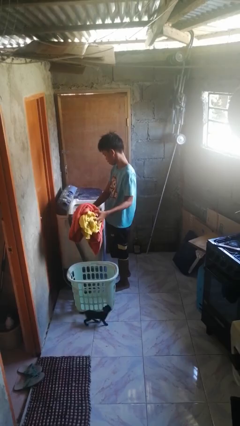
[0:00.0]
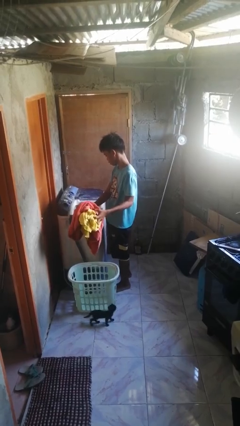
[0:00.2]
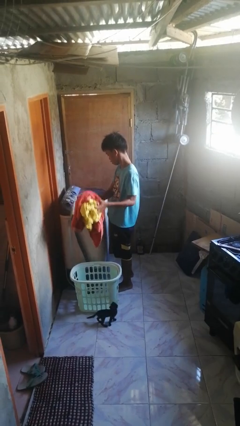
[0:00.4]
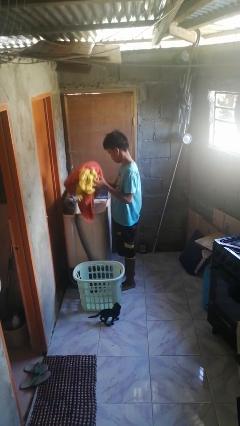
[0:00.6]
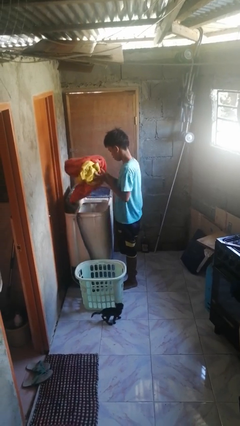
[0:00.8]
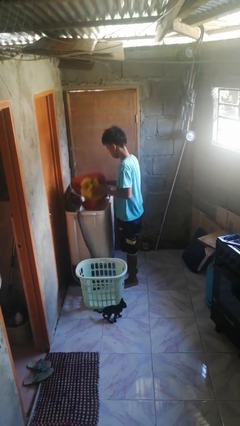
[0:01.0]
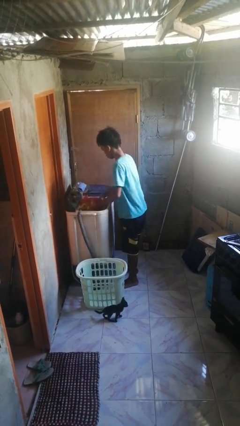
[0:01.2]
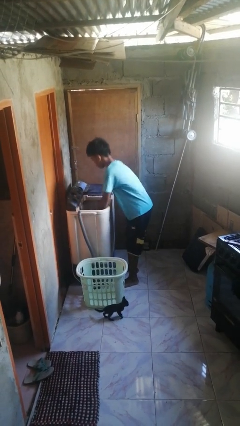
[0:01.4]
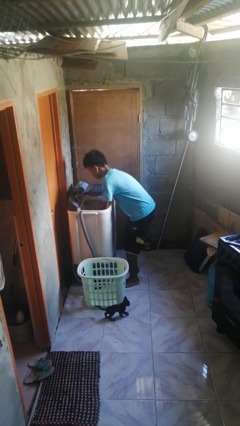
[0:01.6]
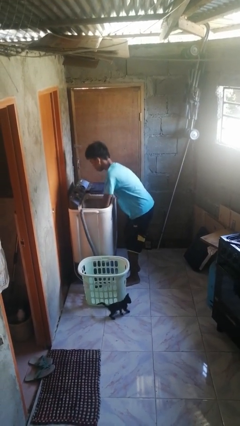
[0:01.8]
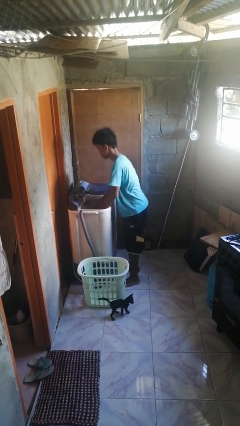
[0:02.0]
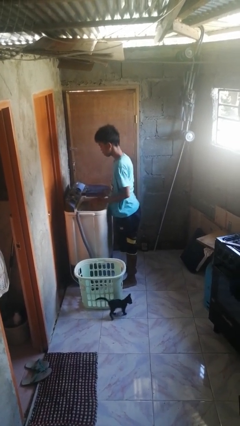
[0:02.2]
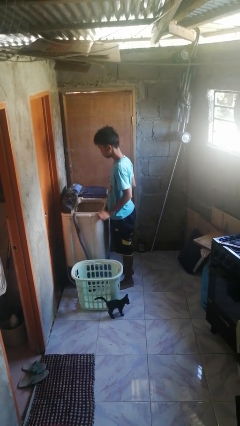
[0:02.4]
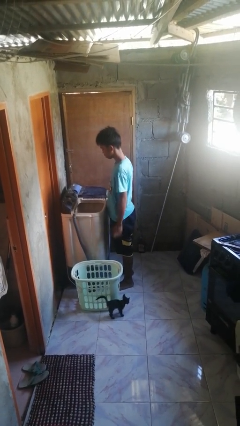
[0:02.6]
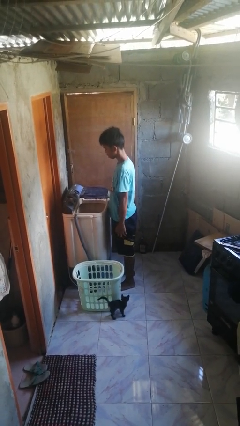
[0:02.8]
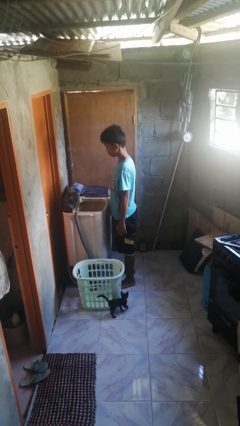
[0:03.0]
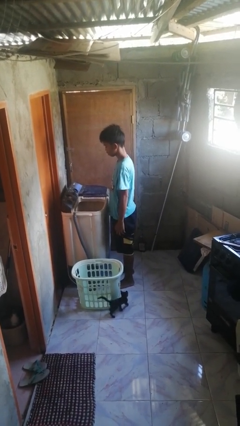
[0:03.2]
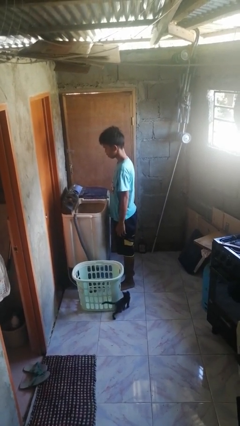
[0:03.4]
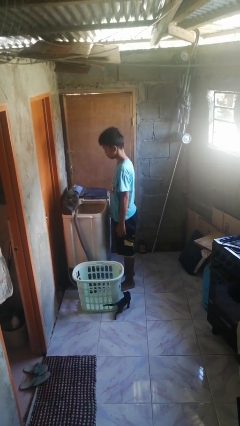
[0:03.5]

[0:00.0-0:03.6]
person loads clotheswasher

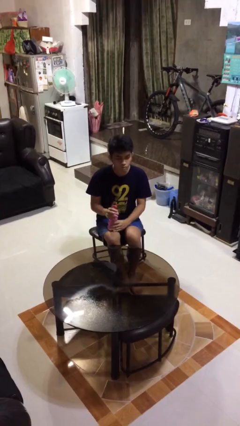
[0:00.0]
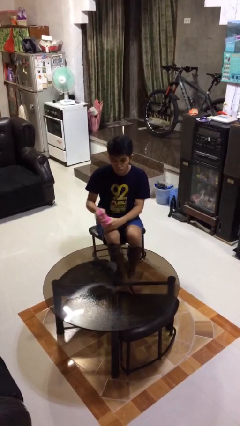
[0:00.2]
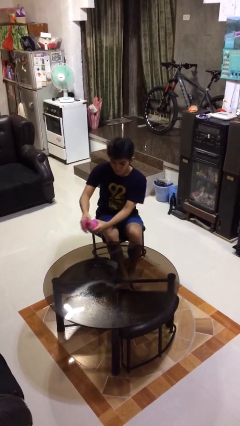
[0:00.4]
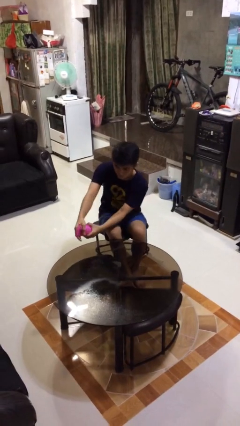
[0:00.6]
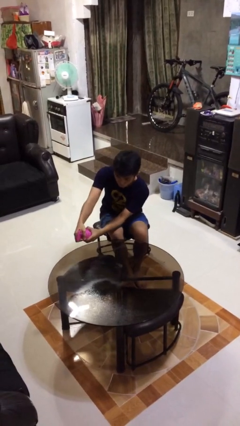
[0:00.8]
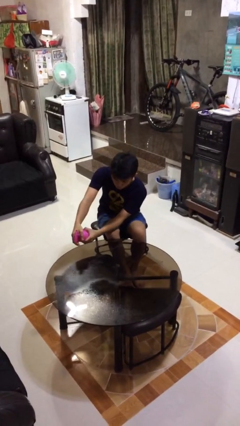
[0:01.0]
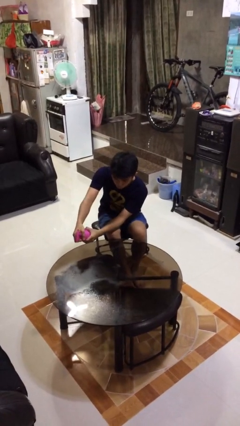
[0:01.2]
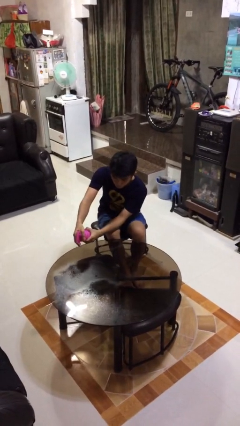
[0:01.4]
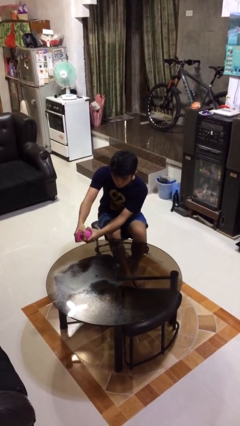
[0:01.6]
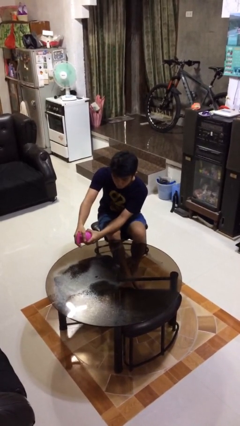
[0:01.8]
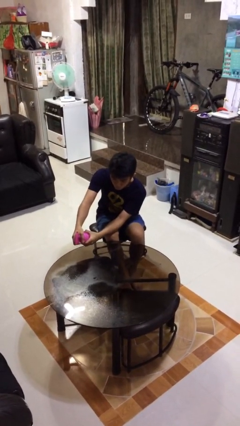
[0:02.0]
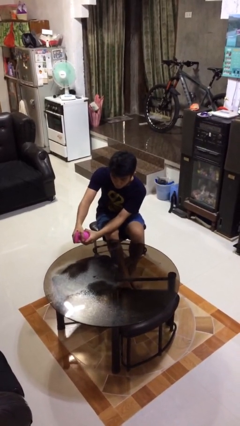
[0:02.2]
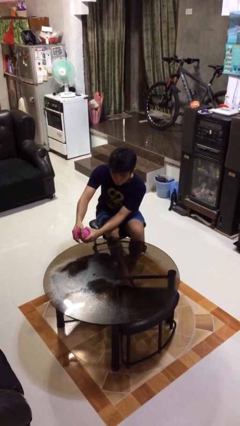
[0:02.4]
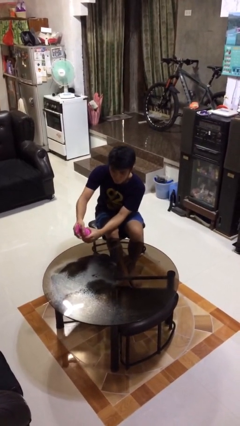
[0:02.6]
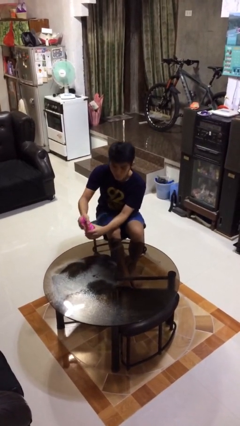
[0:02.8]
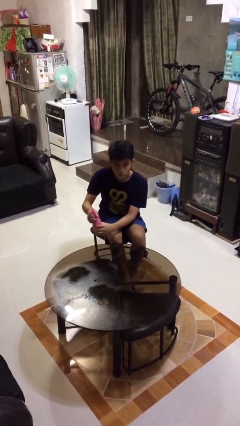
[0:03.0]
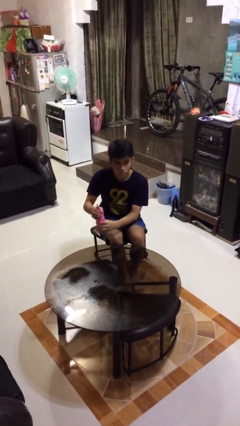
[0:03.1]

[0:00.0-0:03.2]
person sprays from bottle

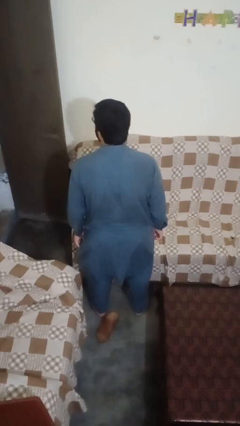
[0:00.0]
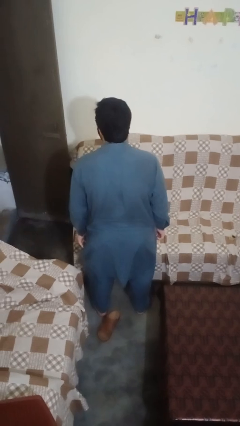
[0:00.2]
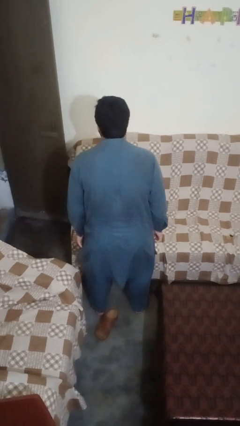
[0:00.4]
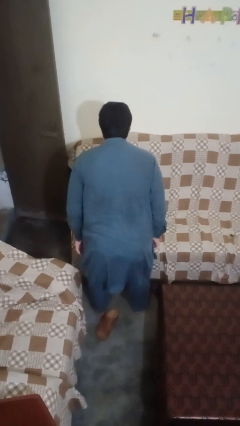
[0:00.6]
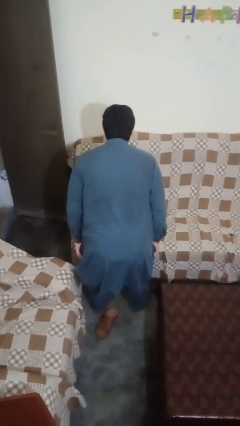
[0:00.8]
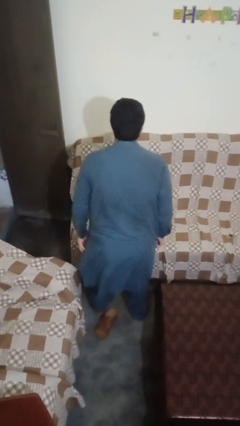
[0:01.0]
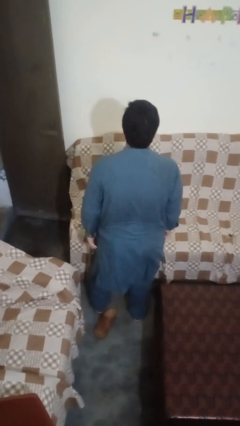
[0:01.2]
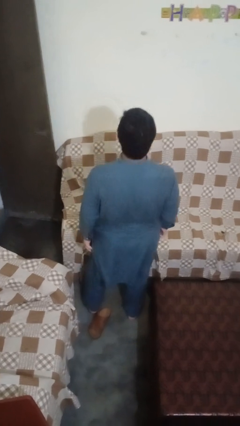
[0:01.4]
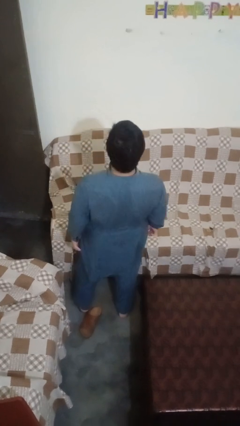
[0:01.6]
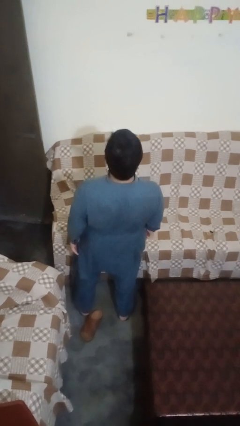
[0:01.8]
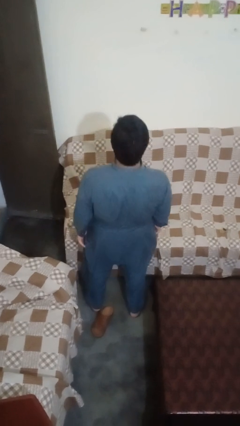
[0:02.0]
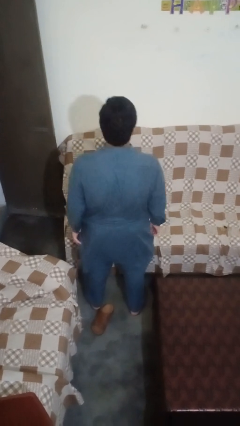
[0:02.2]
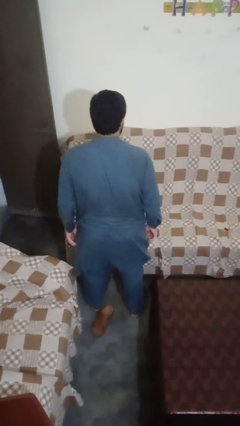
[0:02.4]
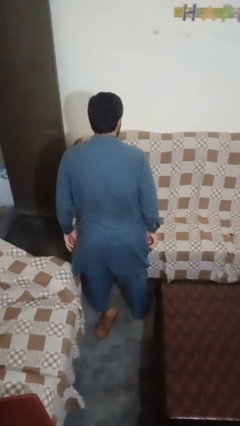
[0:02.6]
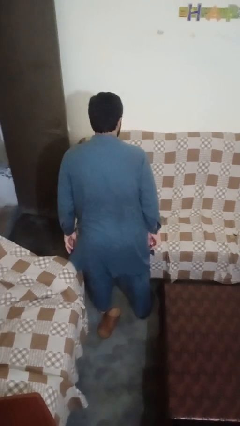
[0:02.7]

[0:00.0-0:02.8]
person wiggles hips

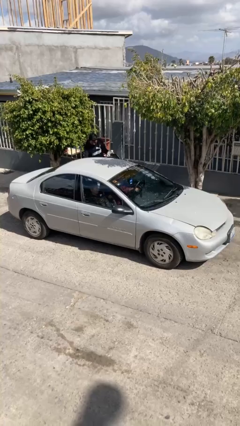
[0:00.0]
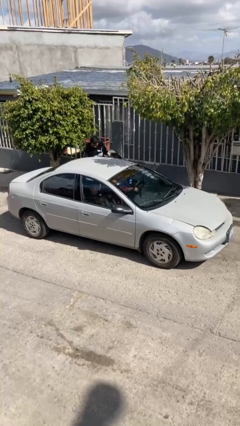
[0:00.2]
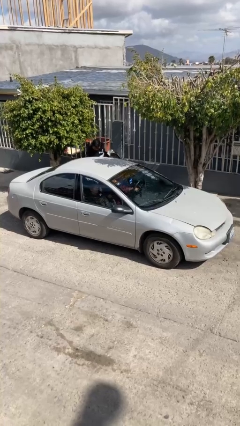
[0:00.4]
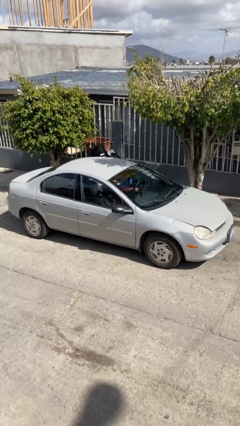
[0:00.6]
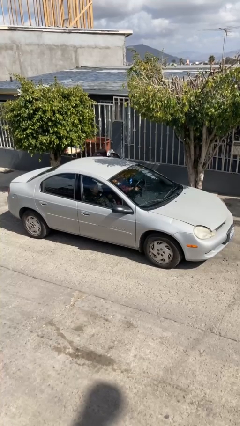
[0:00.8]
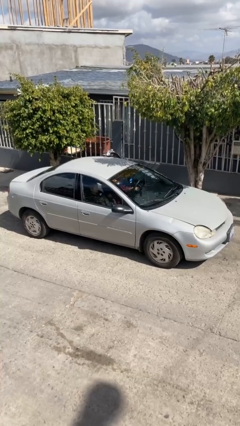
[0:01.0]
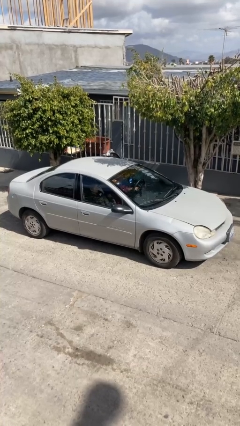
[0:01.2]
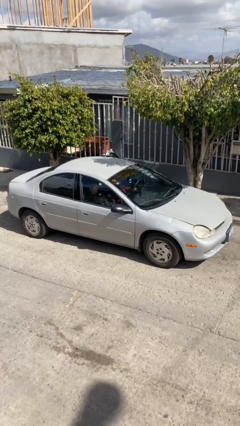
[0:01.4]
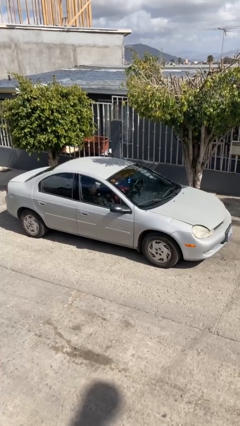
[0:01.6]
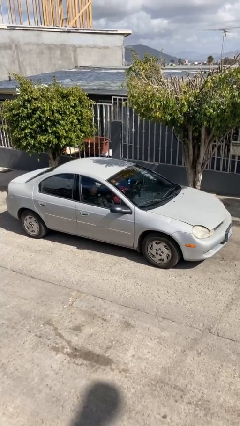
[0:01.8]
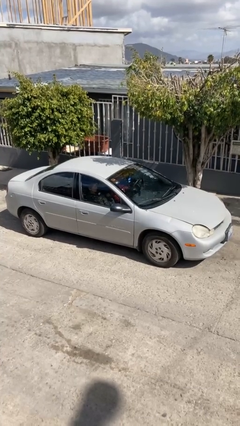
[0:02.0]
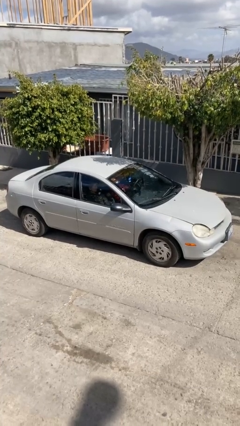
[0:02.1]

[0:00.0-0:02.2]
car picks up person

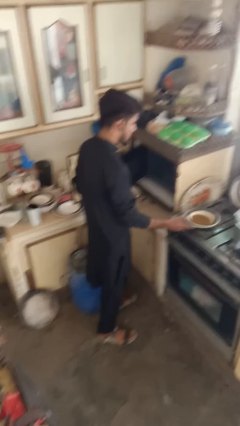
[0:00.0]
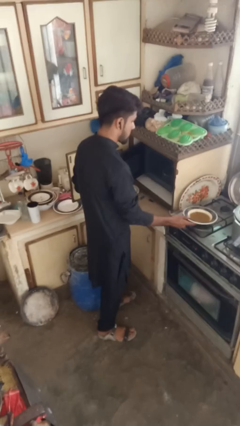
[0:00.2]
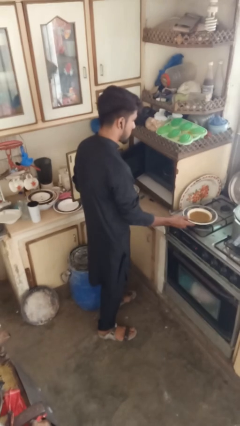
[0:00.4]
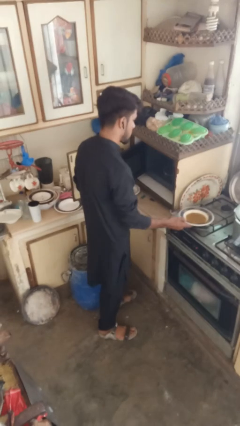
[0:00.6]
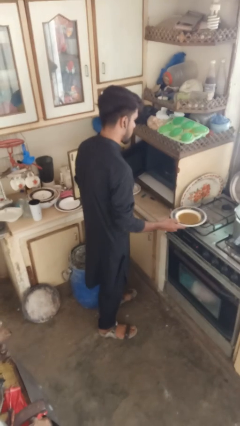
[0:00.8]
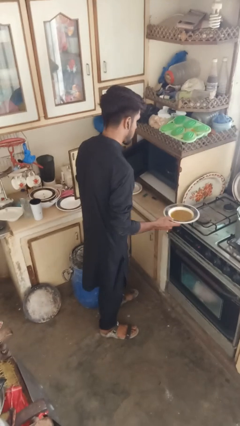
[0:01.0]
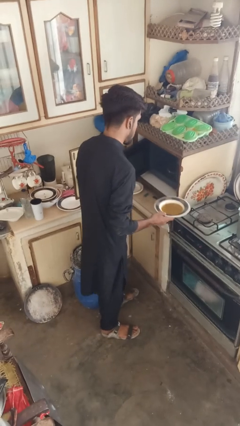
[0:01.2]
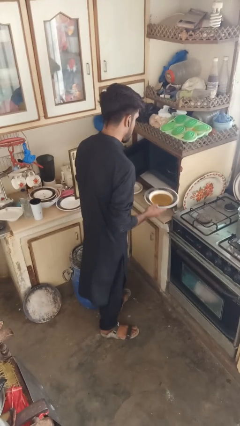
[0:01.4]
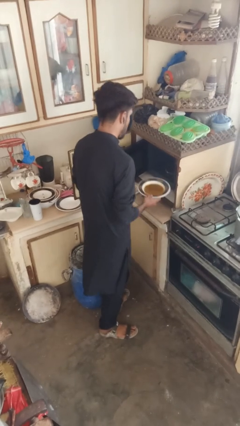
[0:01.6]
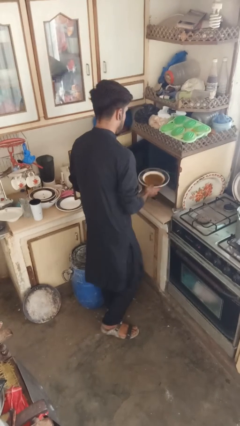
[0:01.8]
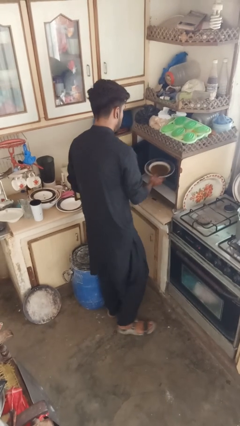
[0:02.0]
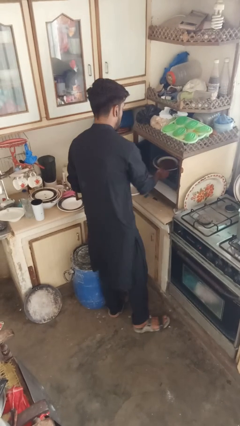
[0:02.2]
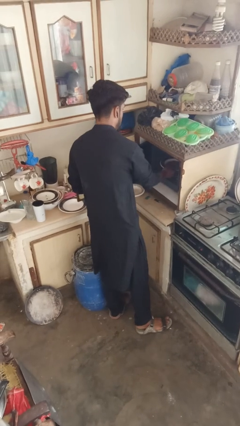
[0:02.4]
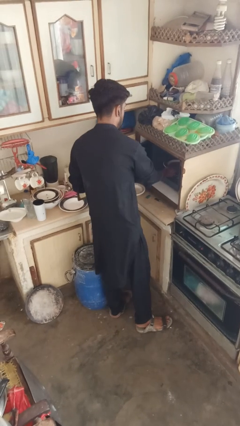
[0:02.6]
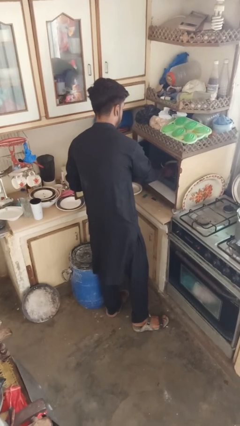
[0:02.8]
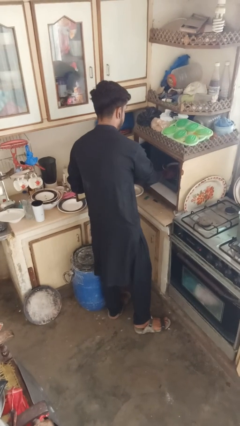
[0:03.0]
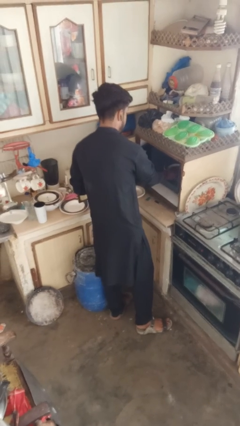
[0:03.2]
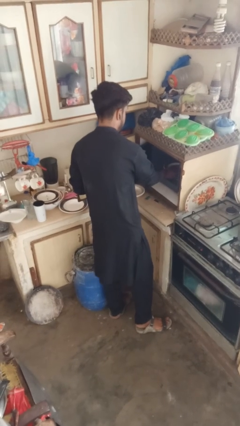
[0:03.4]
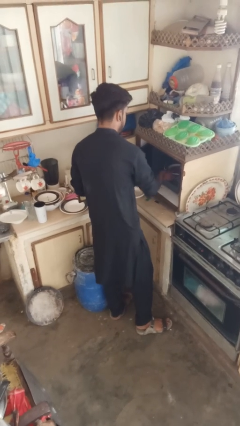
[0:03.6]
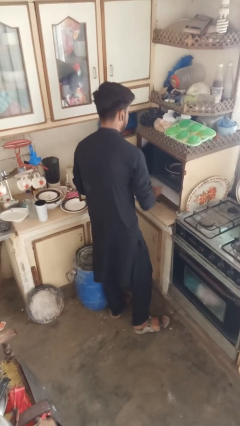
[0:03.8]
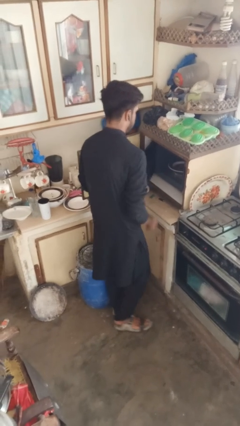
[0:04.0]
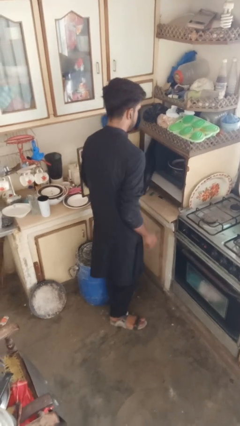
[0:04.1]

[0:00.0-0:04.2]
person puts object into microwave

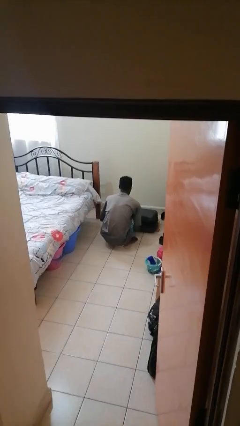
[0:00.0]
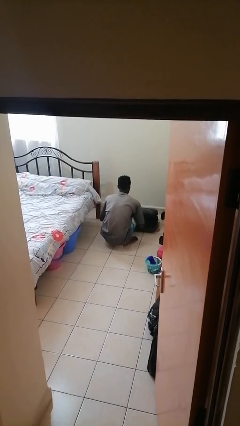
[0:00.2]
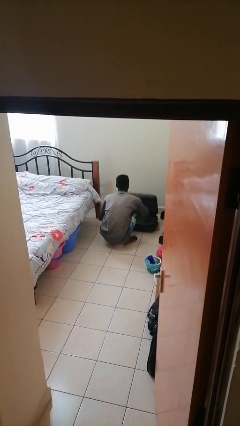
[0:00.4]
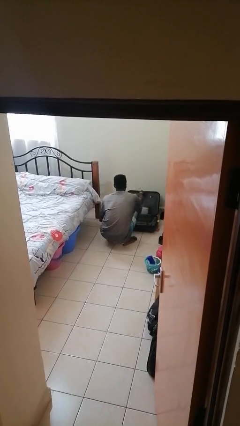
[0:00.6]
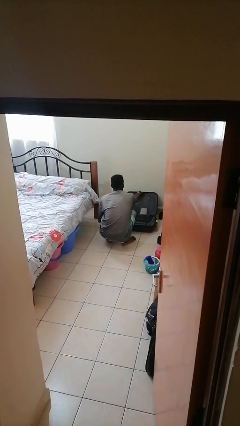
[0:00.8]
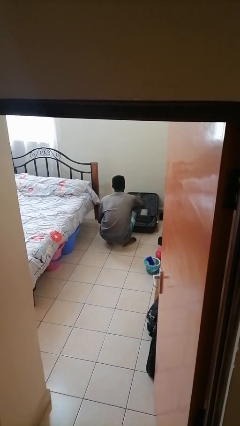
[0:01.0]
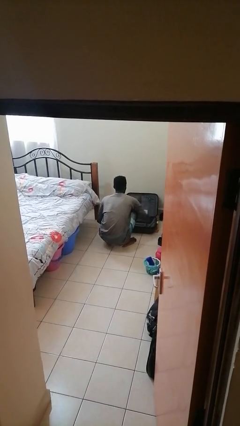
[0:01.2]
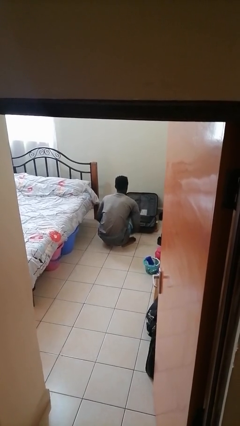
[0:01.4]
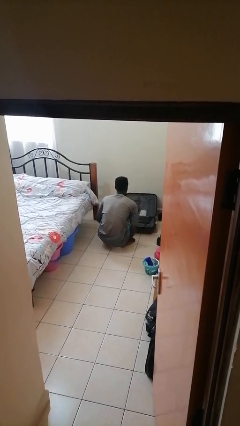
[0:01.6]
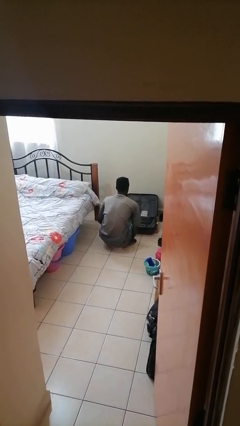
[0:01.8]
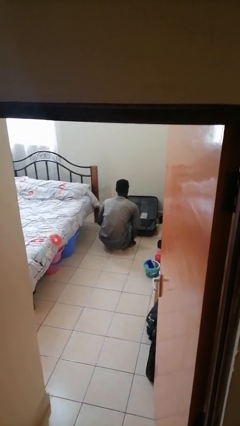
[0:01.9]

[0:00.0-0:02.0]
person opens suitcase
